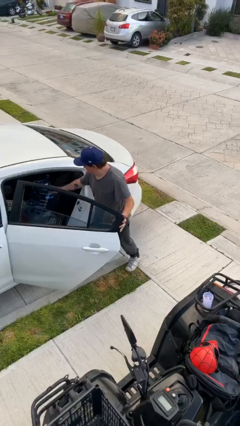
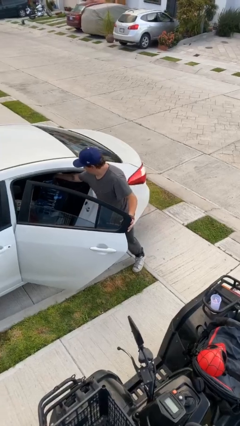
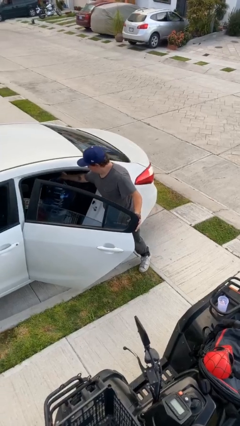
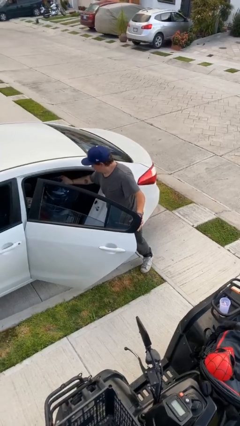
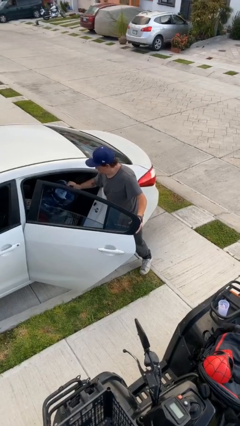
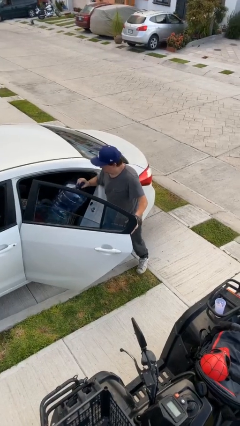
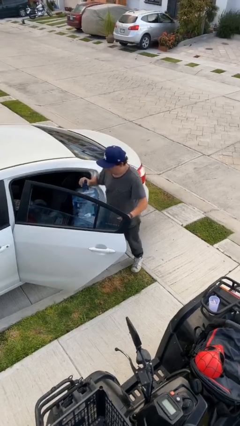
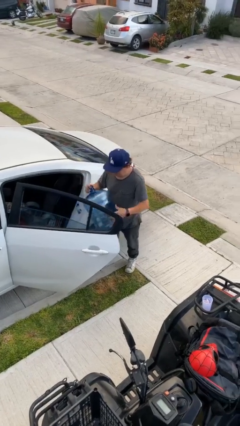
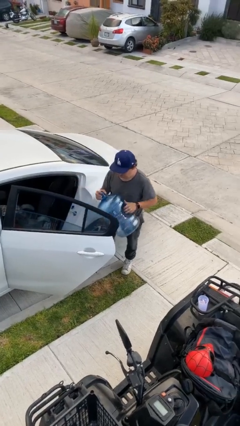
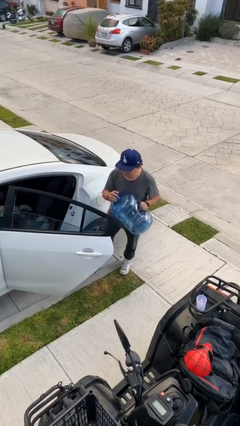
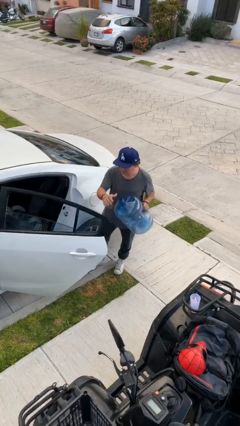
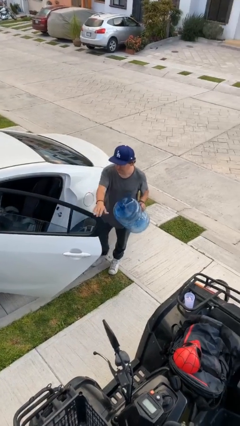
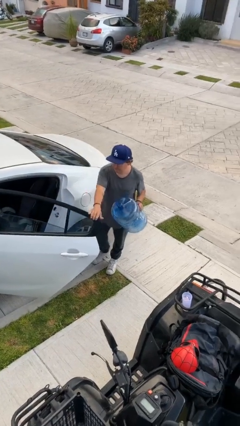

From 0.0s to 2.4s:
person unloads car

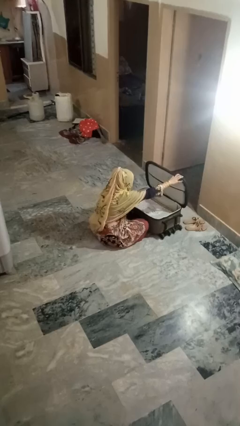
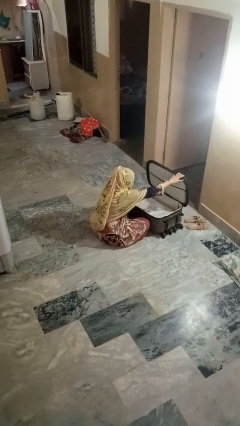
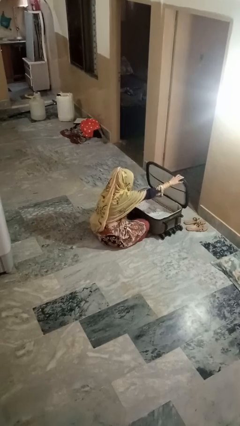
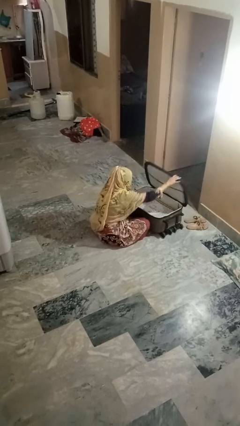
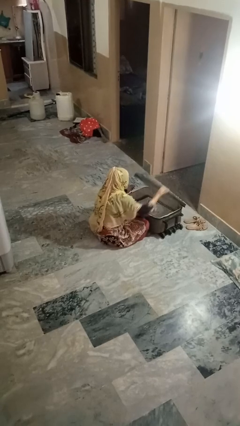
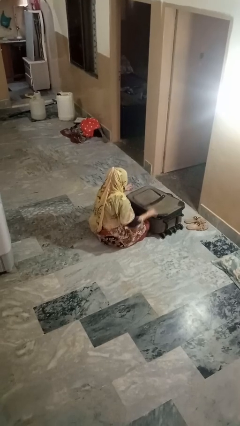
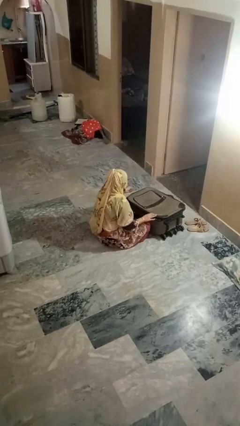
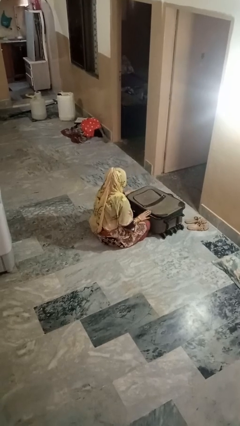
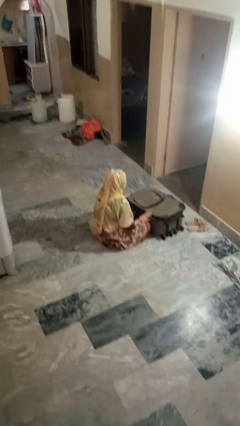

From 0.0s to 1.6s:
person closes suitcase

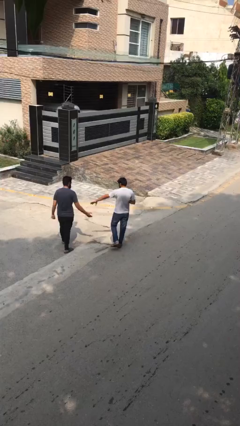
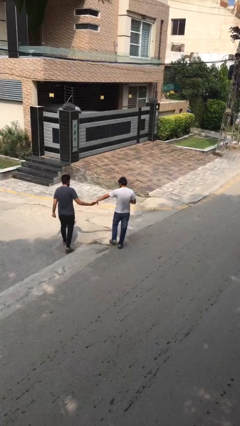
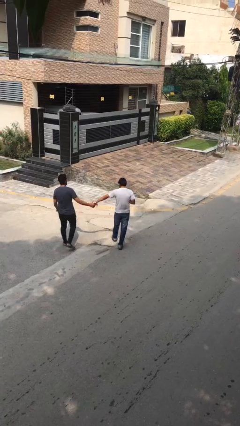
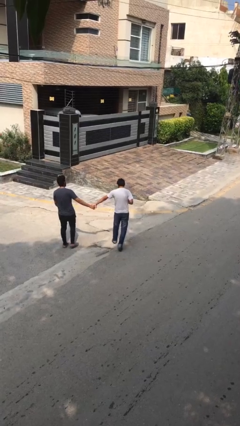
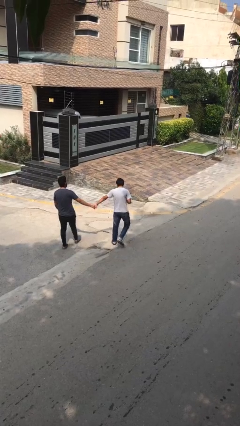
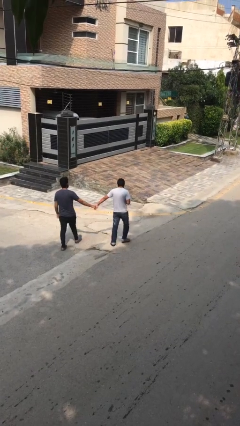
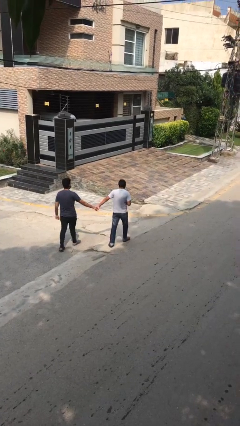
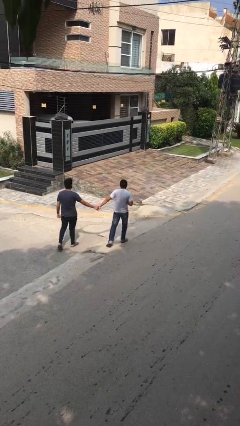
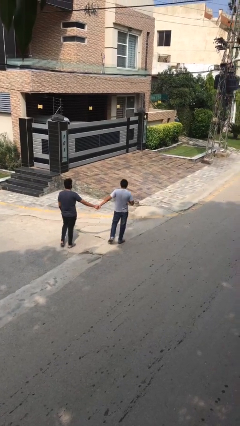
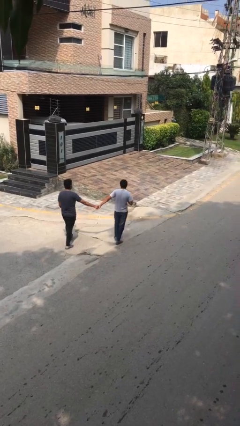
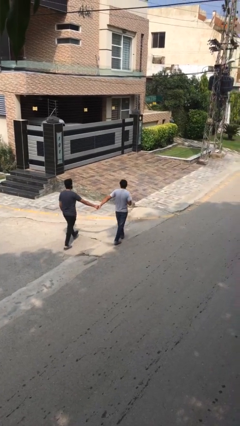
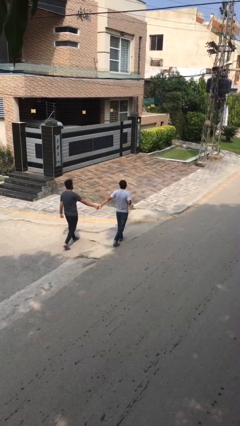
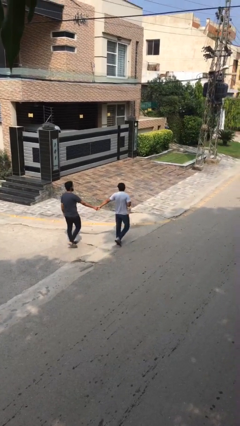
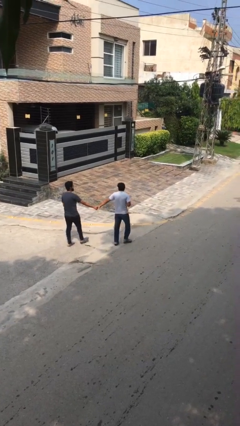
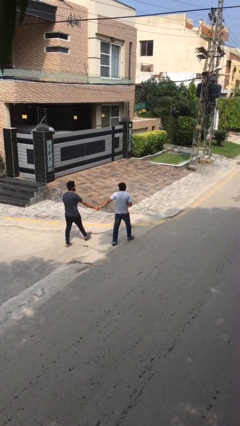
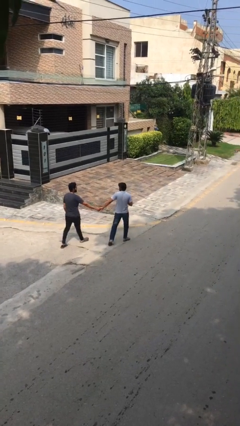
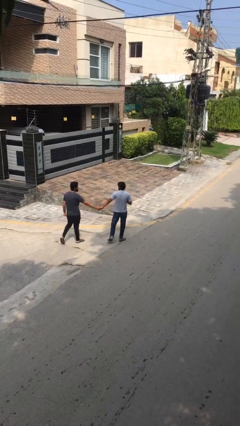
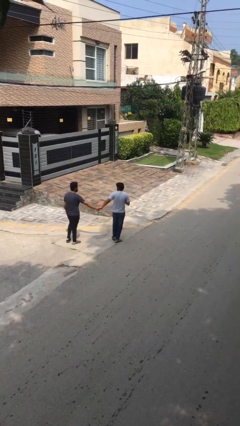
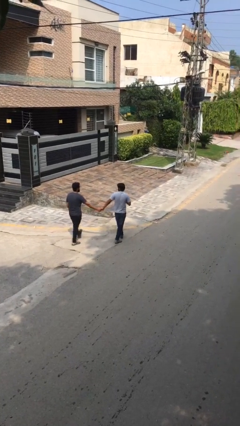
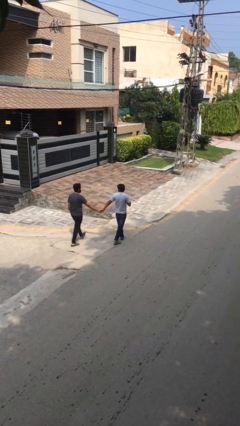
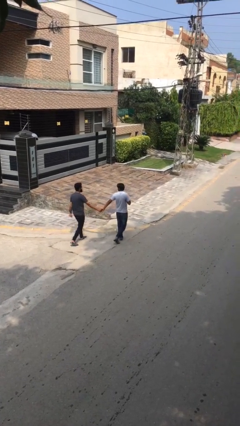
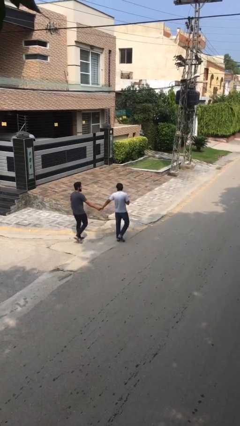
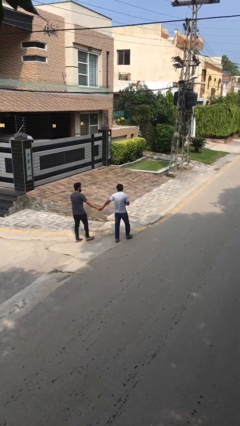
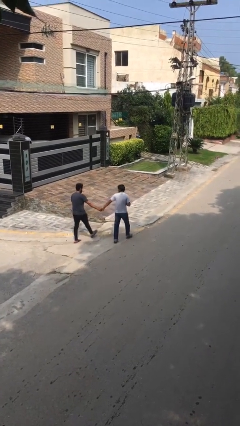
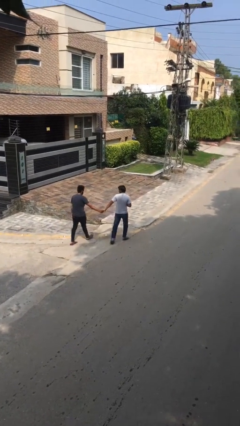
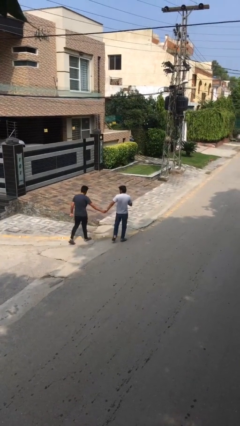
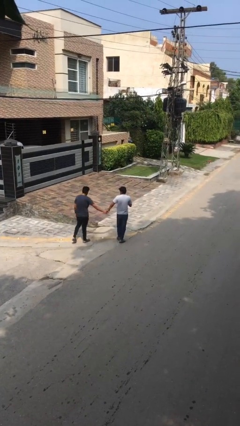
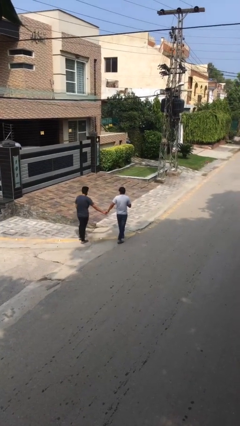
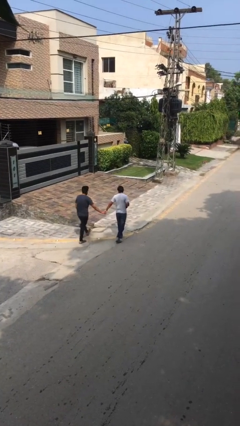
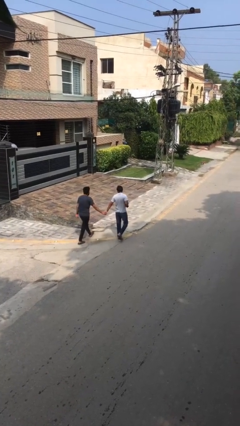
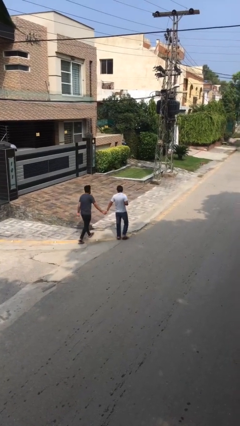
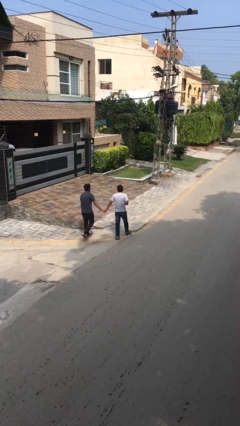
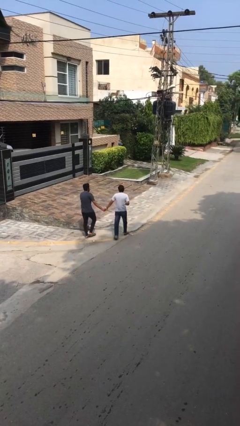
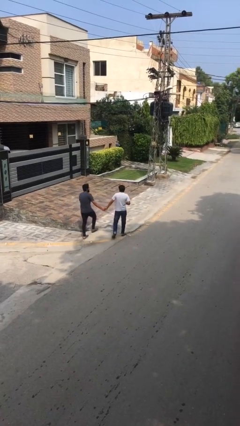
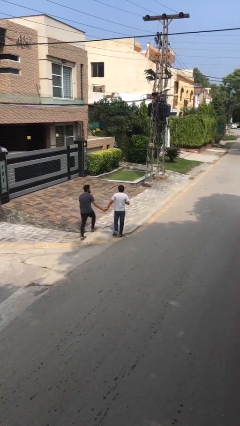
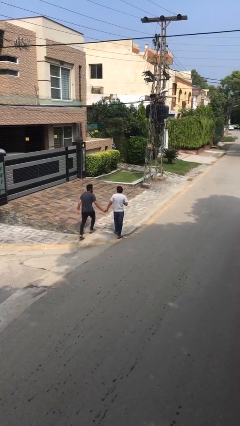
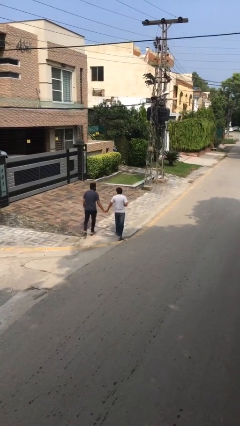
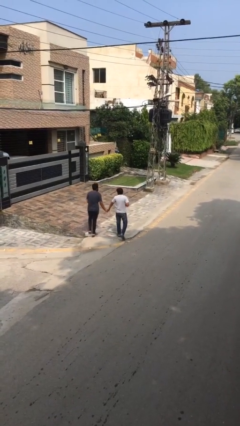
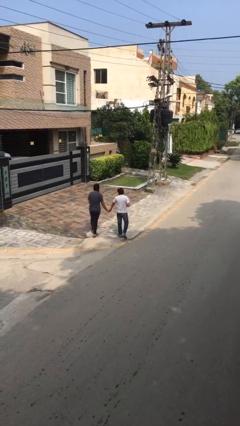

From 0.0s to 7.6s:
person holds hand

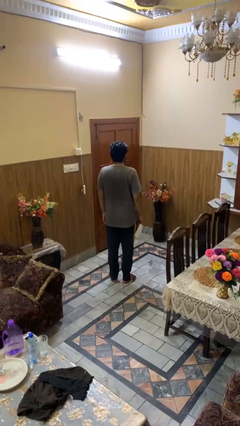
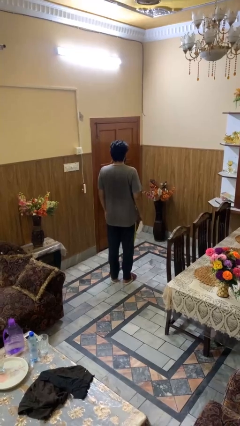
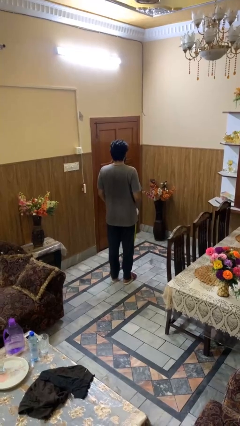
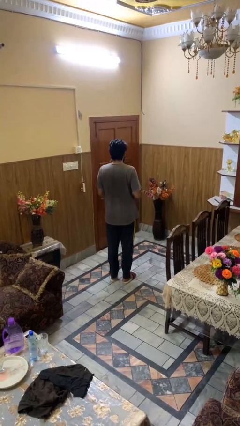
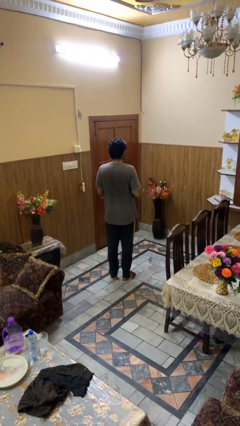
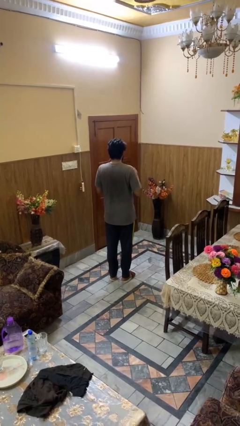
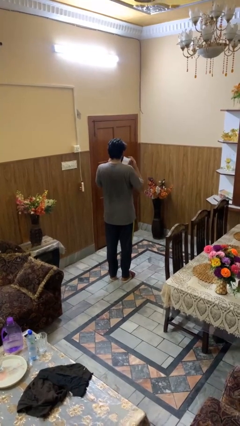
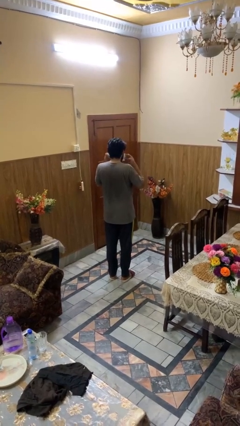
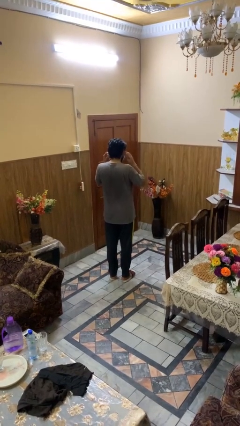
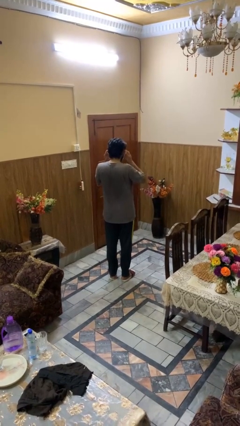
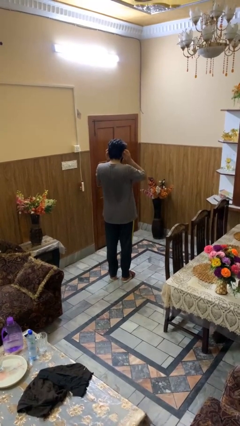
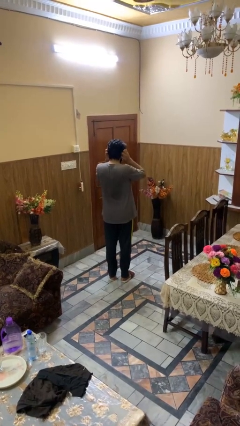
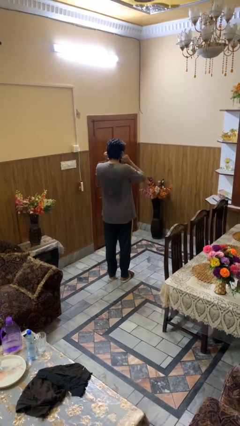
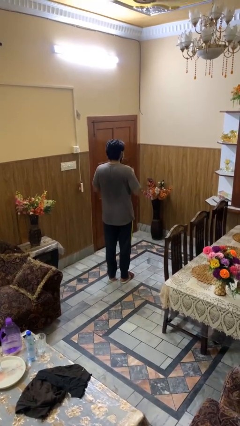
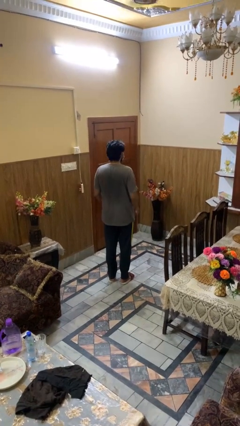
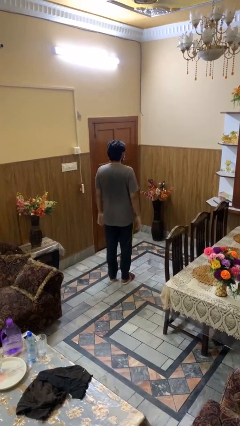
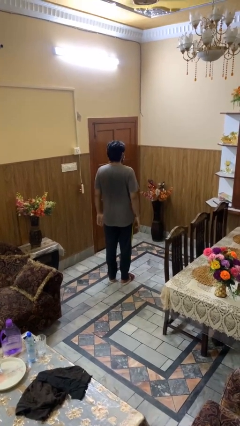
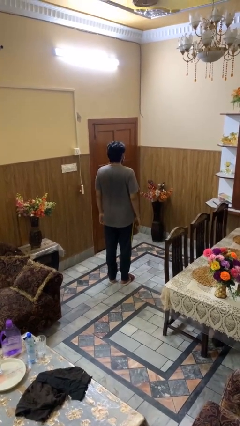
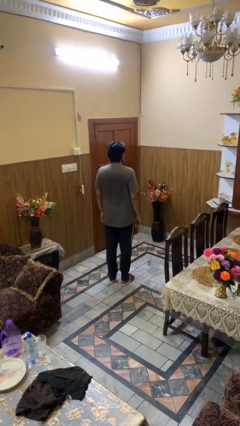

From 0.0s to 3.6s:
person puts on facemask

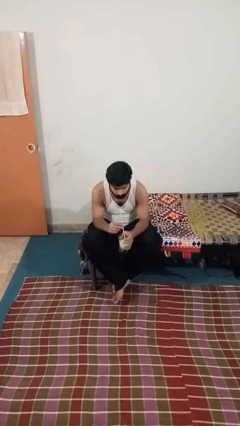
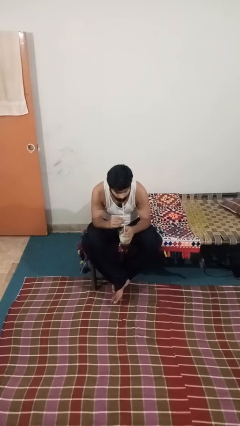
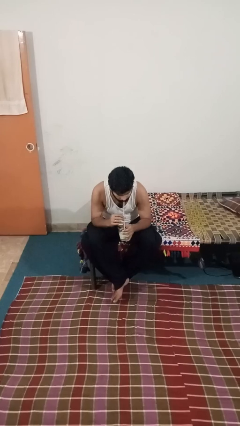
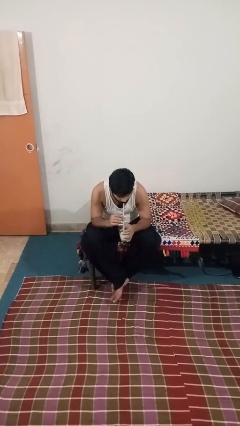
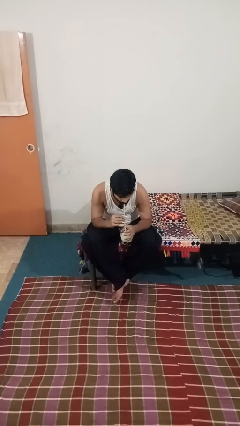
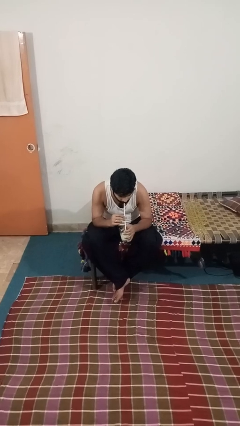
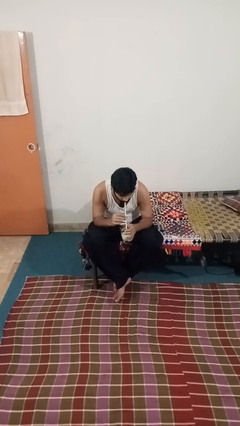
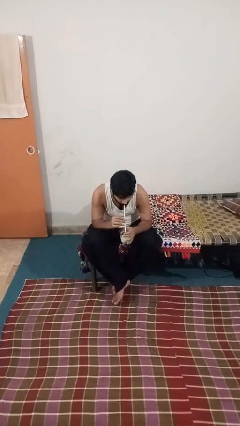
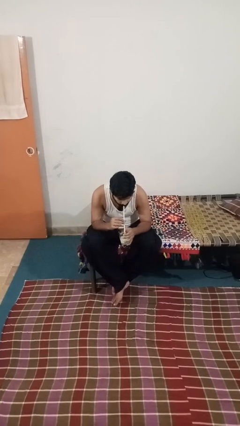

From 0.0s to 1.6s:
person drinks from straw

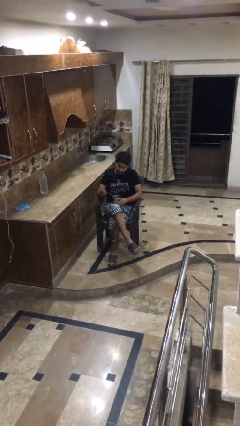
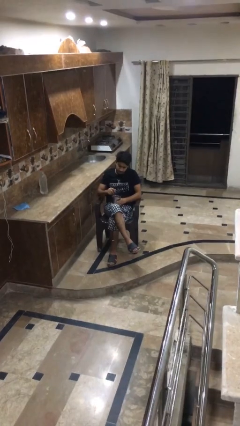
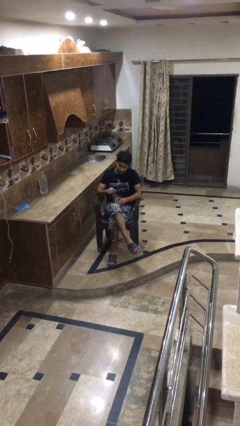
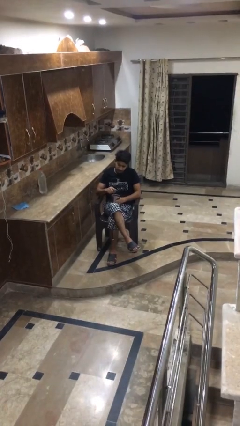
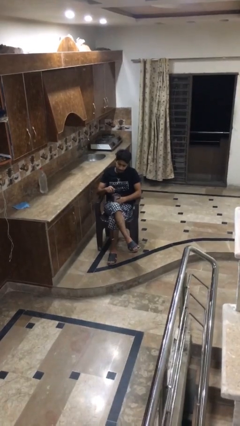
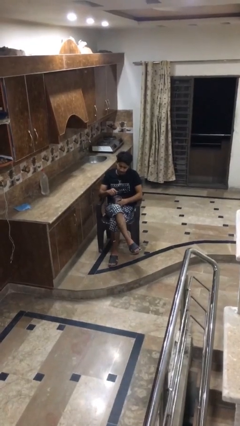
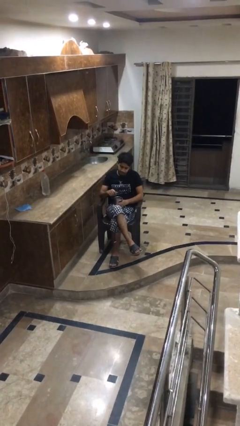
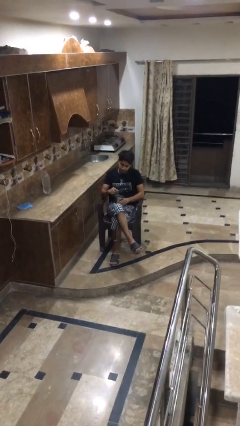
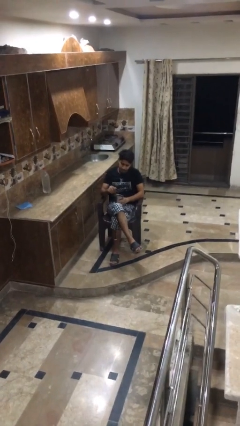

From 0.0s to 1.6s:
person stirs mug
